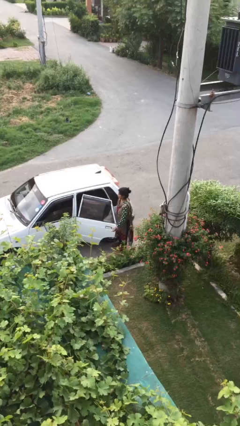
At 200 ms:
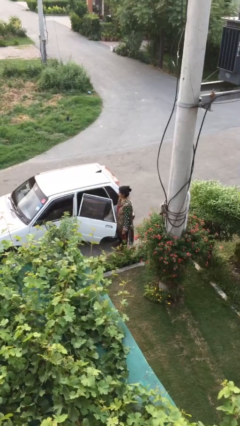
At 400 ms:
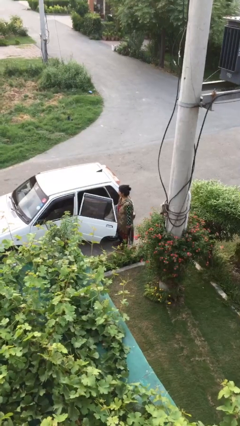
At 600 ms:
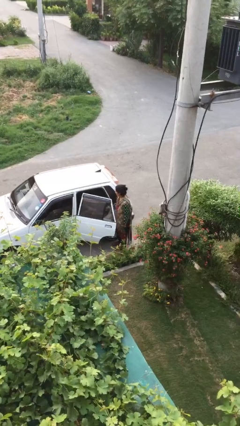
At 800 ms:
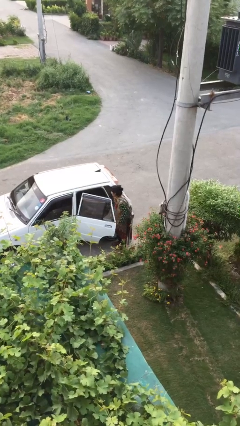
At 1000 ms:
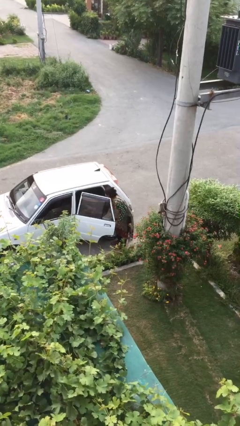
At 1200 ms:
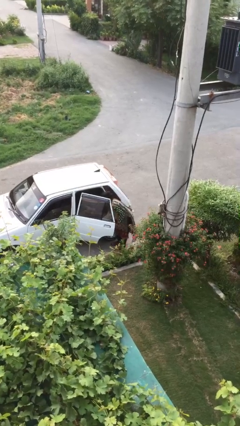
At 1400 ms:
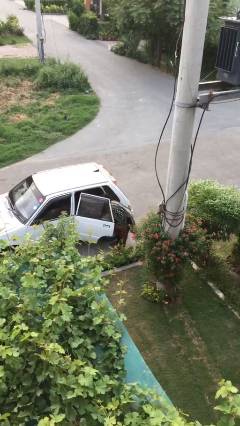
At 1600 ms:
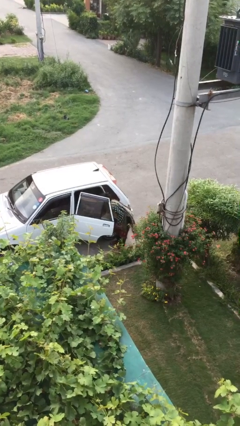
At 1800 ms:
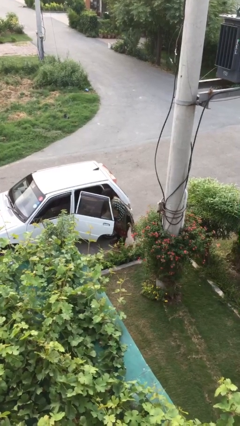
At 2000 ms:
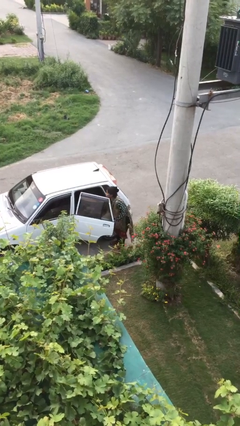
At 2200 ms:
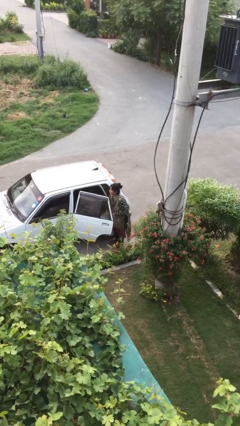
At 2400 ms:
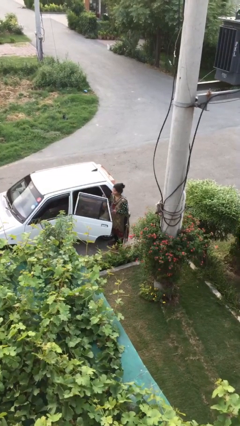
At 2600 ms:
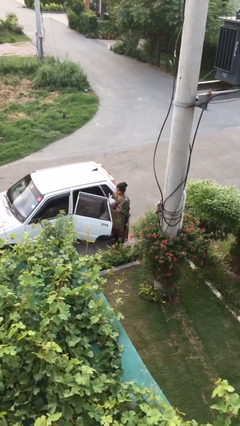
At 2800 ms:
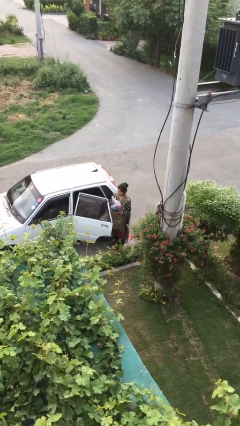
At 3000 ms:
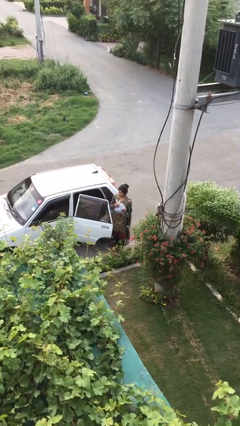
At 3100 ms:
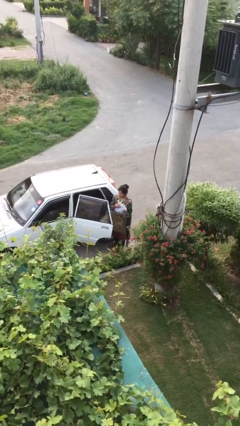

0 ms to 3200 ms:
person unloads car

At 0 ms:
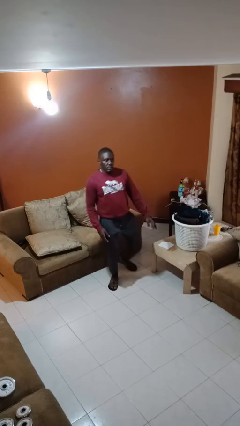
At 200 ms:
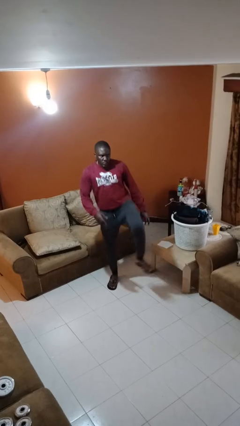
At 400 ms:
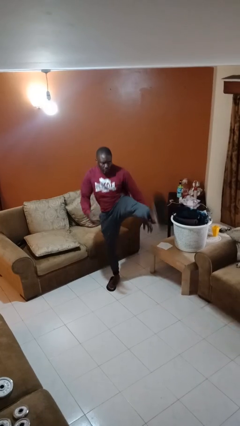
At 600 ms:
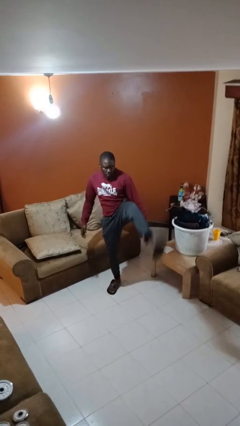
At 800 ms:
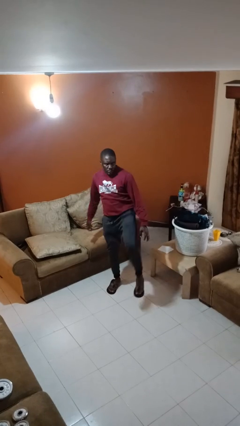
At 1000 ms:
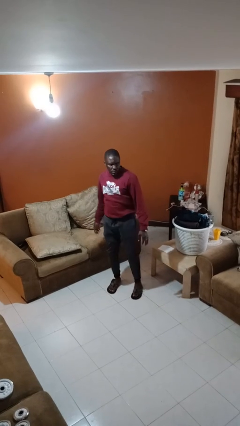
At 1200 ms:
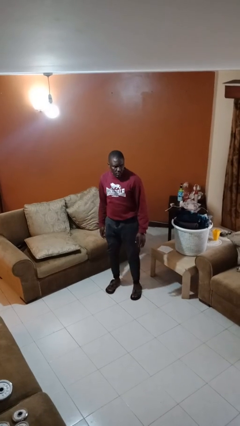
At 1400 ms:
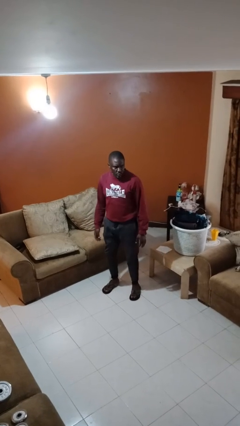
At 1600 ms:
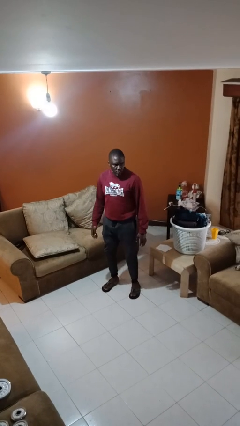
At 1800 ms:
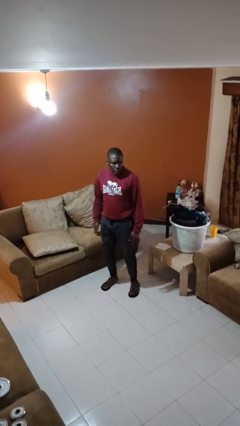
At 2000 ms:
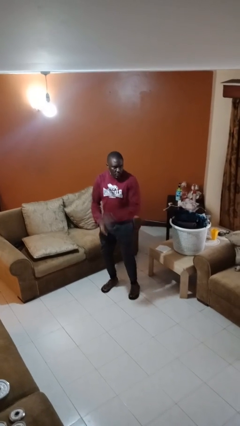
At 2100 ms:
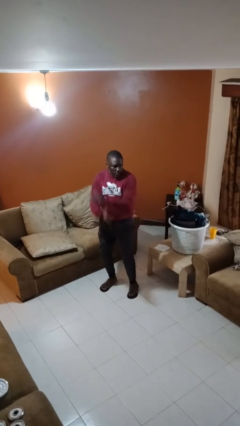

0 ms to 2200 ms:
person karate kicks

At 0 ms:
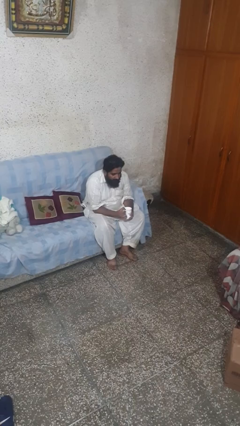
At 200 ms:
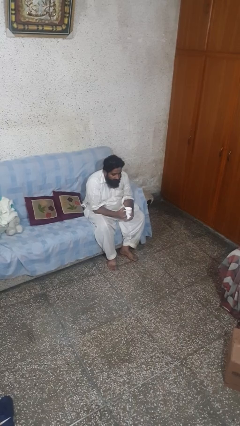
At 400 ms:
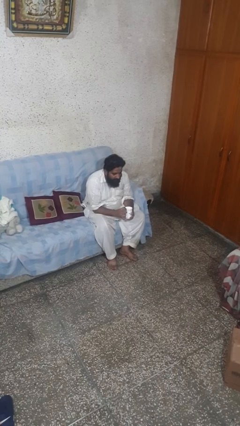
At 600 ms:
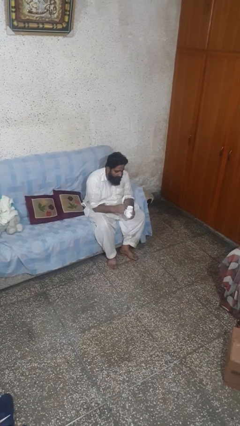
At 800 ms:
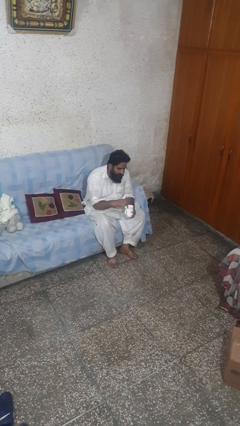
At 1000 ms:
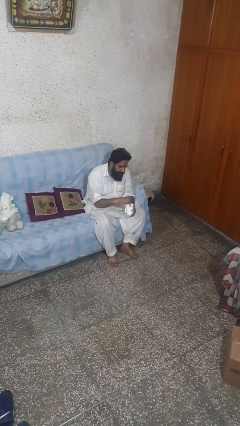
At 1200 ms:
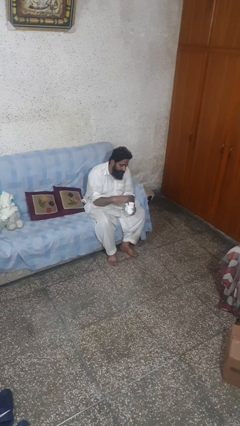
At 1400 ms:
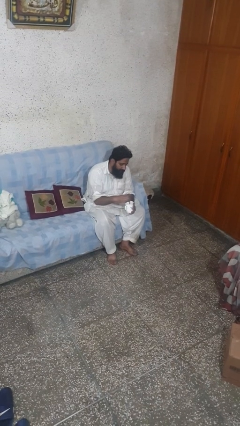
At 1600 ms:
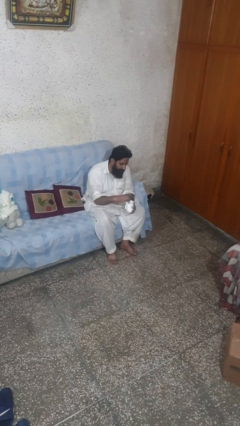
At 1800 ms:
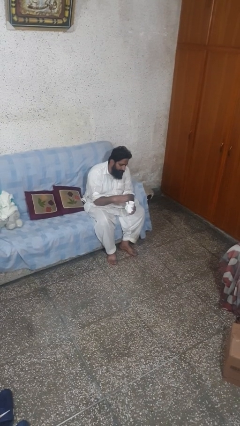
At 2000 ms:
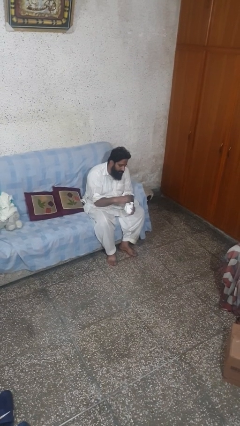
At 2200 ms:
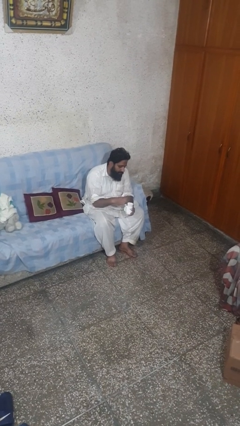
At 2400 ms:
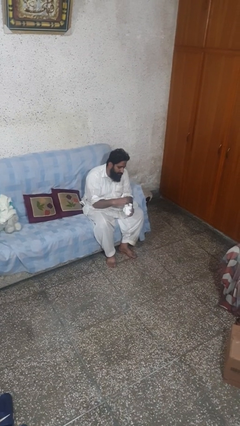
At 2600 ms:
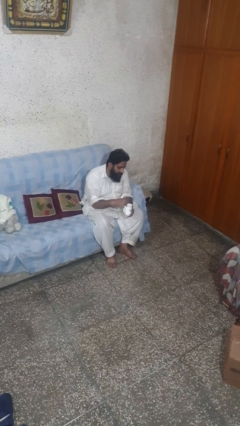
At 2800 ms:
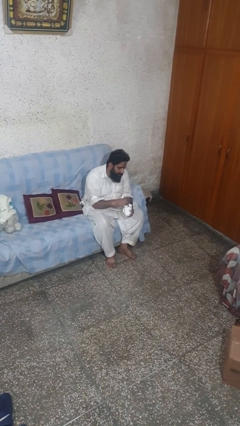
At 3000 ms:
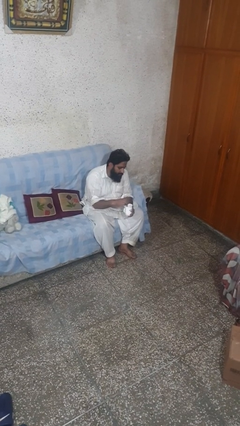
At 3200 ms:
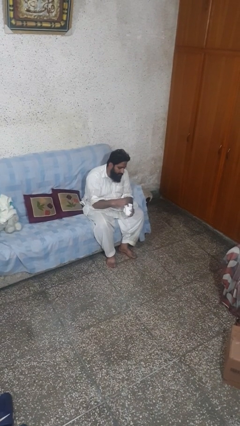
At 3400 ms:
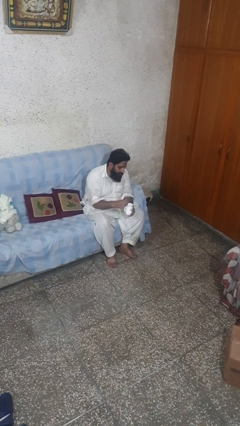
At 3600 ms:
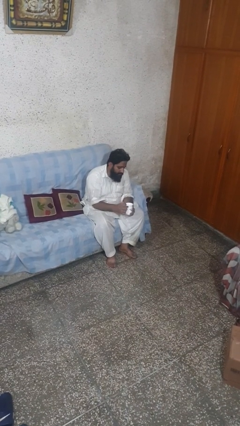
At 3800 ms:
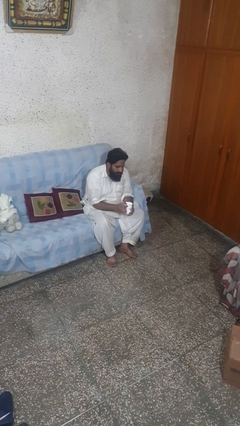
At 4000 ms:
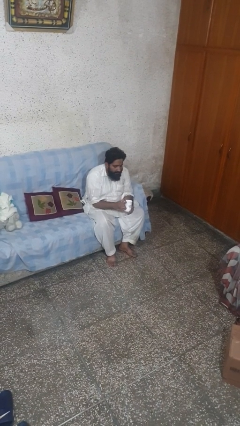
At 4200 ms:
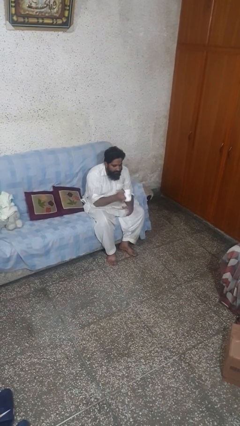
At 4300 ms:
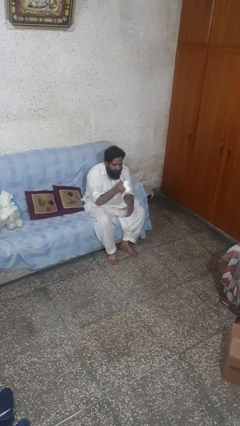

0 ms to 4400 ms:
person stirs mug

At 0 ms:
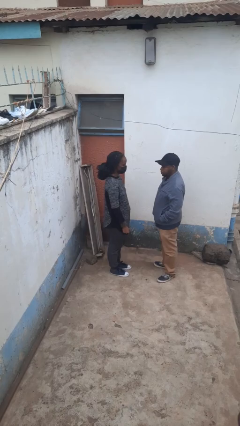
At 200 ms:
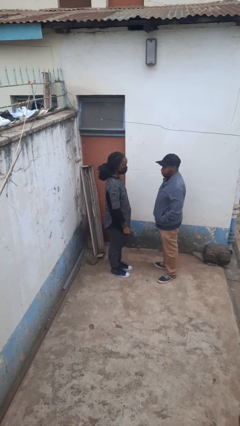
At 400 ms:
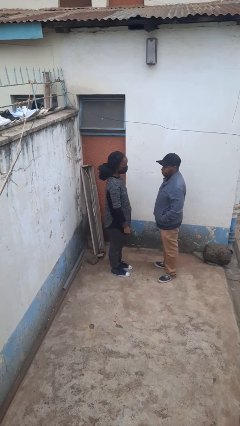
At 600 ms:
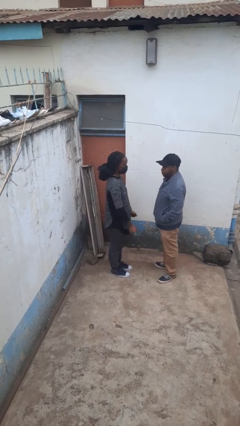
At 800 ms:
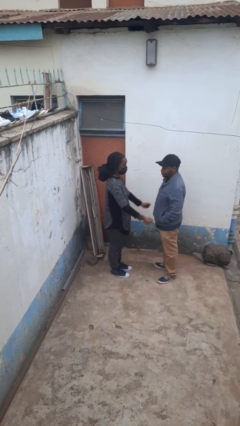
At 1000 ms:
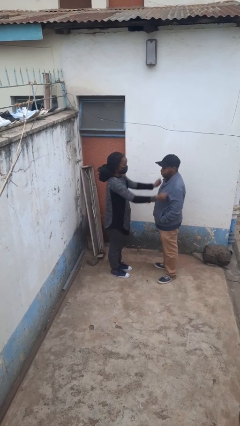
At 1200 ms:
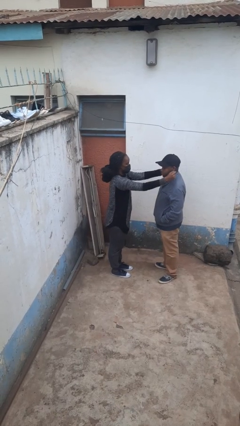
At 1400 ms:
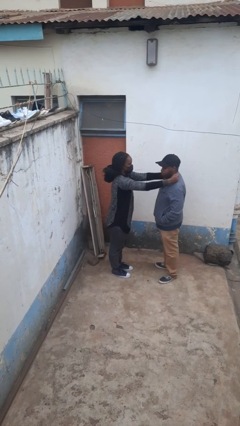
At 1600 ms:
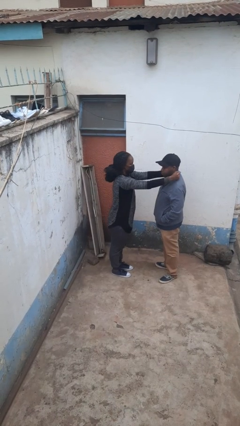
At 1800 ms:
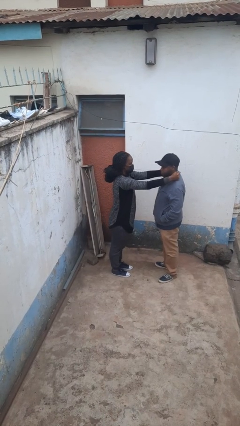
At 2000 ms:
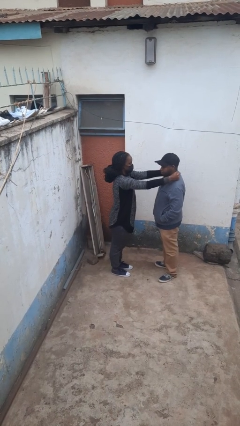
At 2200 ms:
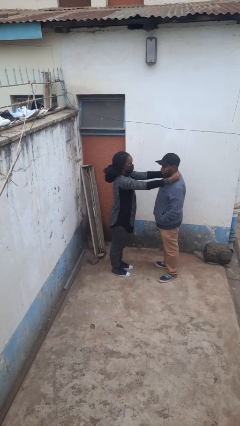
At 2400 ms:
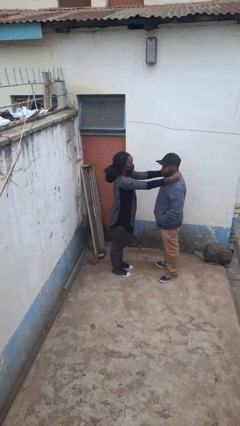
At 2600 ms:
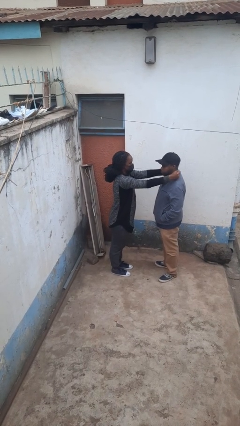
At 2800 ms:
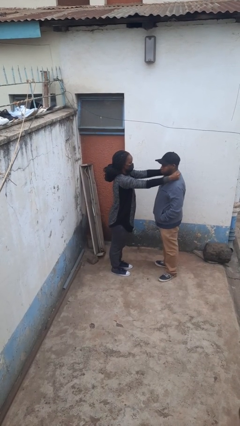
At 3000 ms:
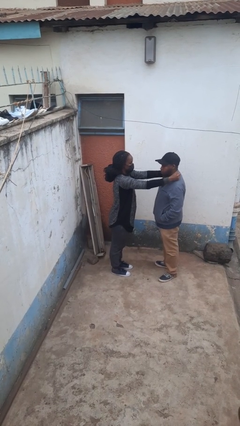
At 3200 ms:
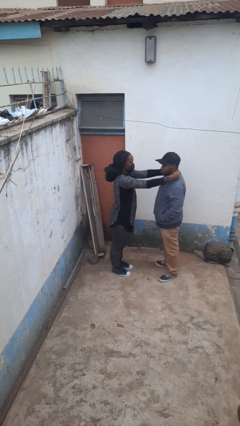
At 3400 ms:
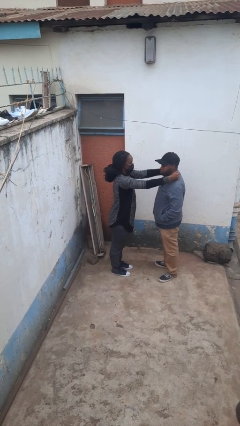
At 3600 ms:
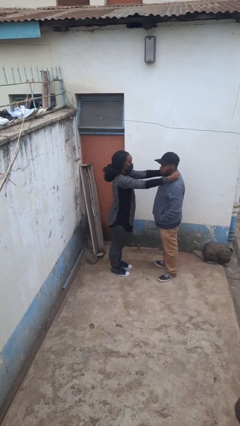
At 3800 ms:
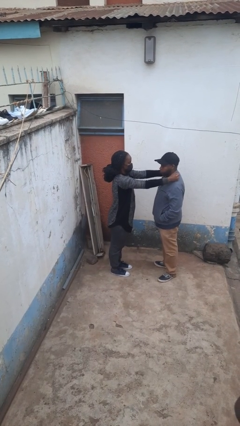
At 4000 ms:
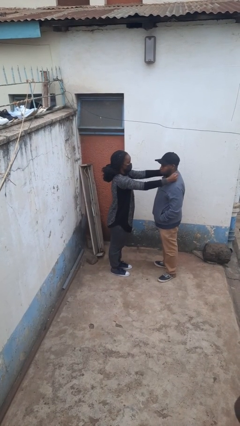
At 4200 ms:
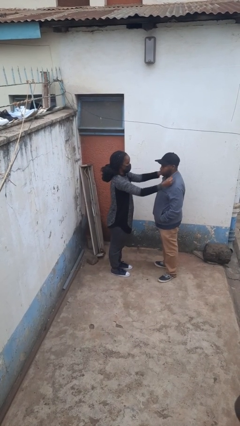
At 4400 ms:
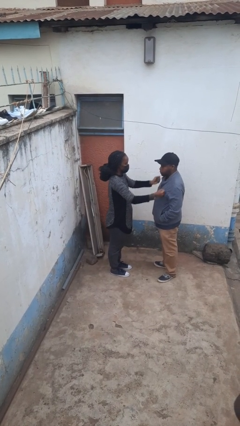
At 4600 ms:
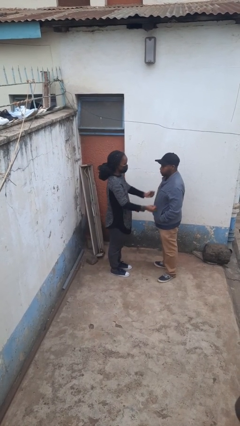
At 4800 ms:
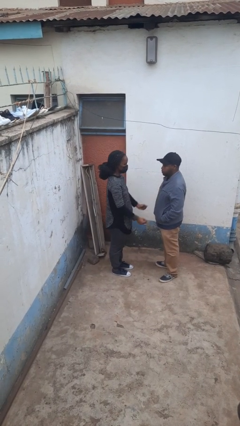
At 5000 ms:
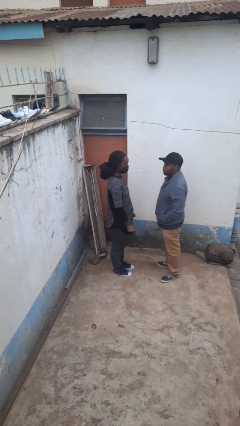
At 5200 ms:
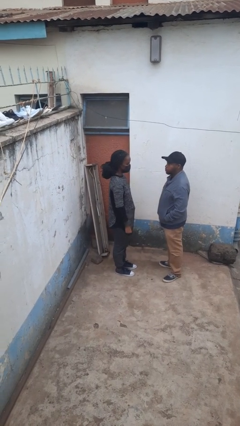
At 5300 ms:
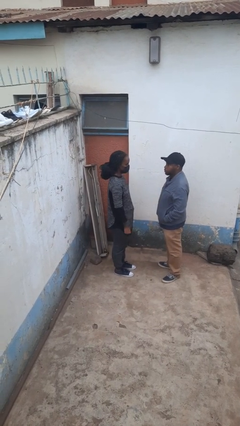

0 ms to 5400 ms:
person pounds shoulders of person

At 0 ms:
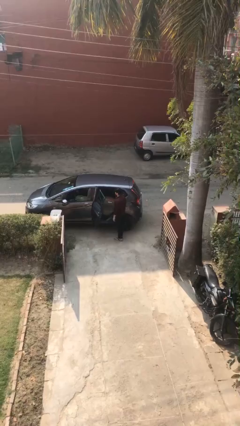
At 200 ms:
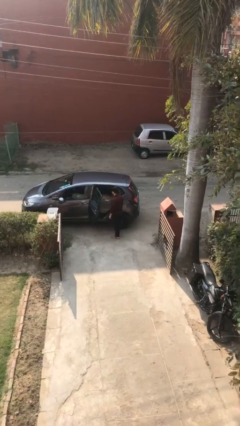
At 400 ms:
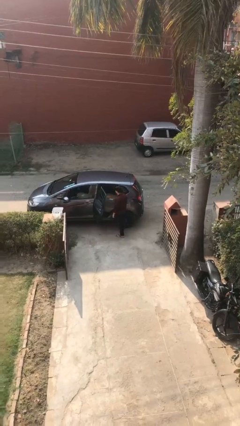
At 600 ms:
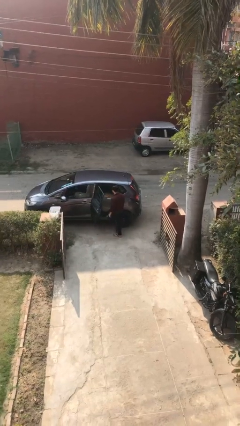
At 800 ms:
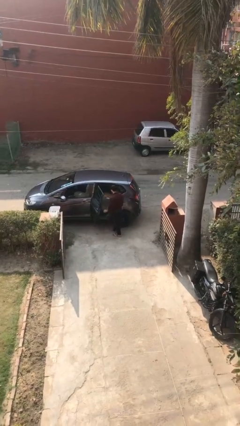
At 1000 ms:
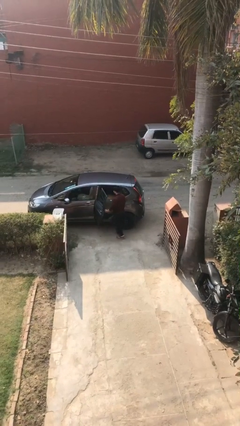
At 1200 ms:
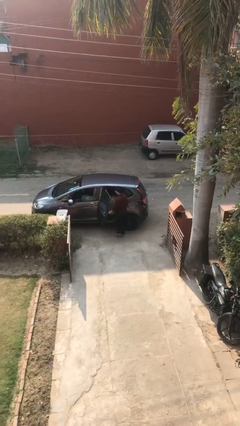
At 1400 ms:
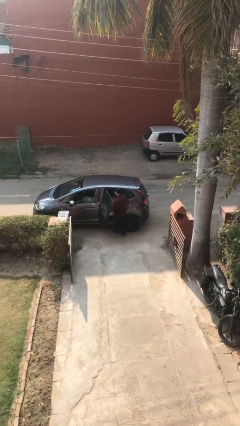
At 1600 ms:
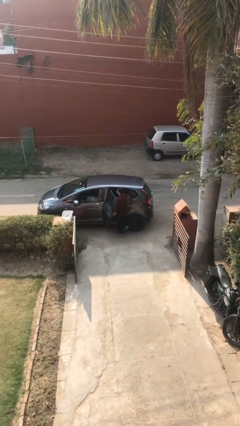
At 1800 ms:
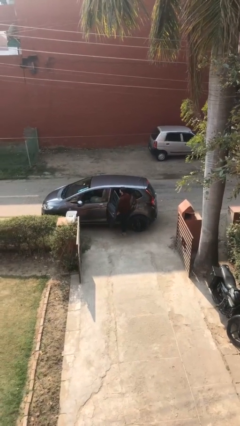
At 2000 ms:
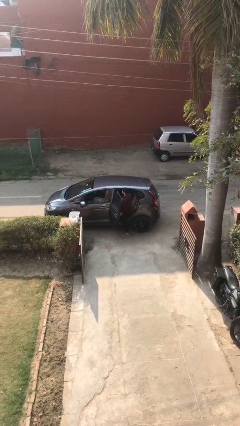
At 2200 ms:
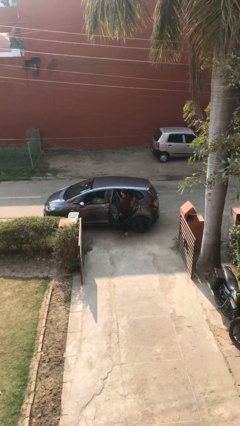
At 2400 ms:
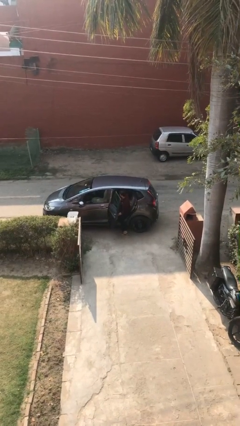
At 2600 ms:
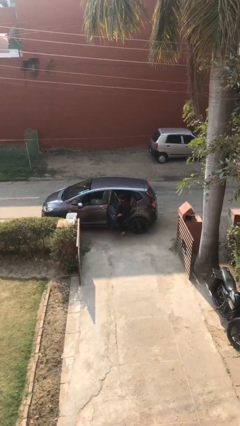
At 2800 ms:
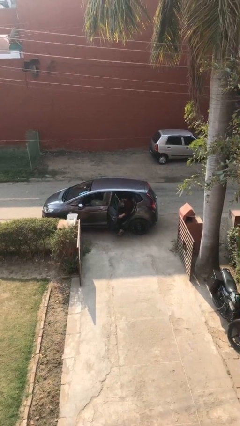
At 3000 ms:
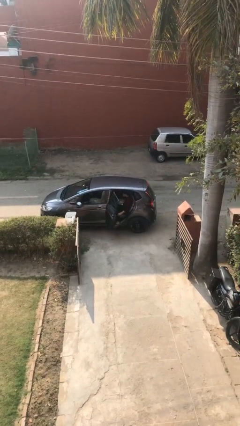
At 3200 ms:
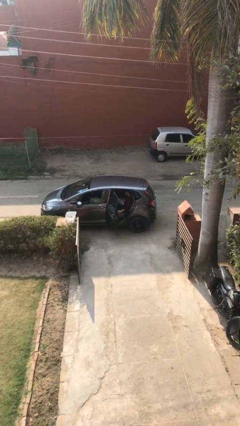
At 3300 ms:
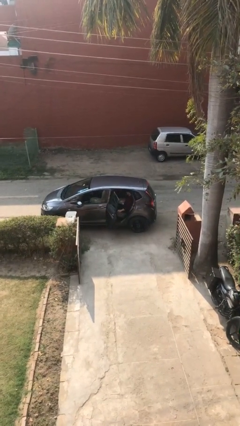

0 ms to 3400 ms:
person enters car
